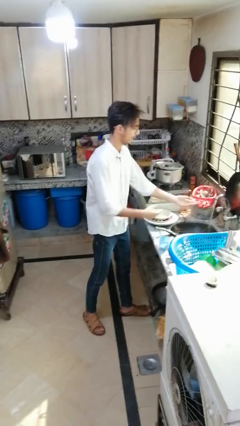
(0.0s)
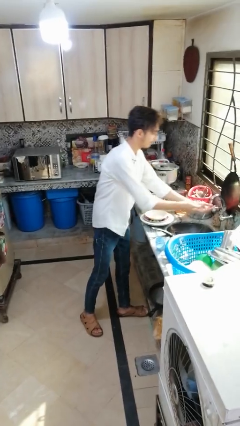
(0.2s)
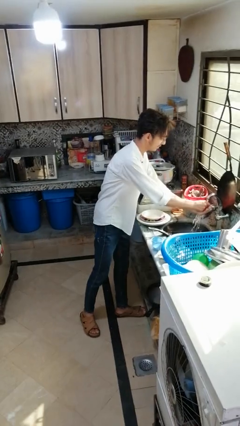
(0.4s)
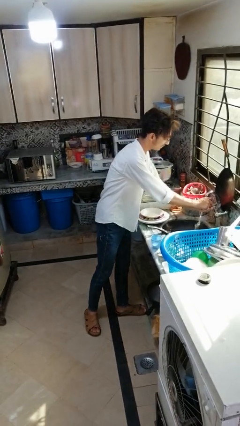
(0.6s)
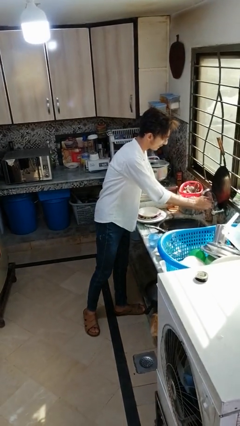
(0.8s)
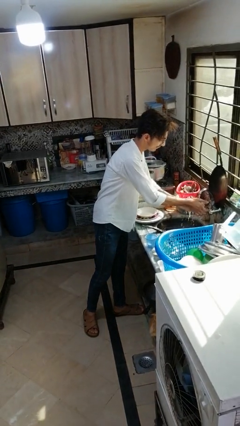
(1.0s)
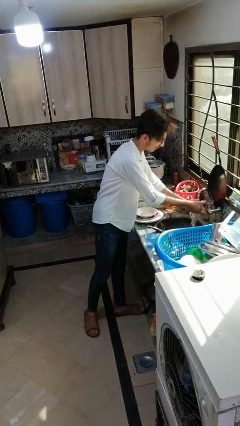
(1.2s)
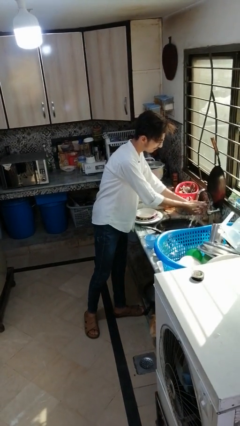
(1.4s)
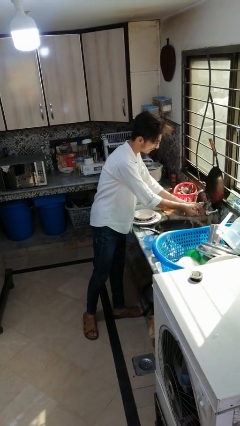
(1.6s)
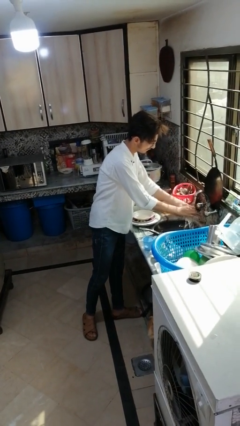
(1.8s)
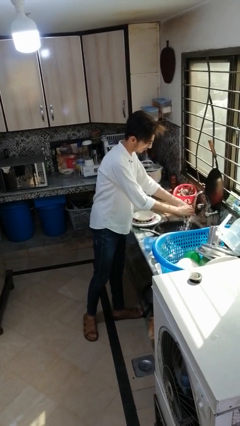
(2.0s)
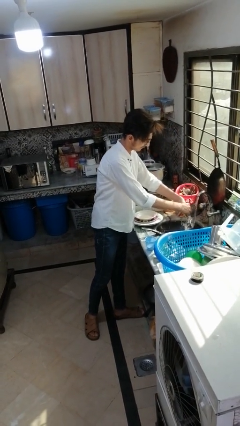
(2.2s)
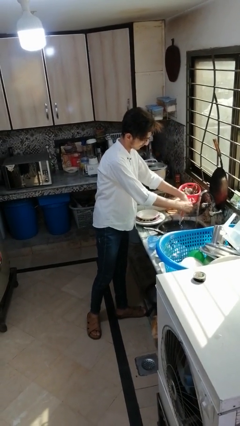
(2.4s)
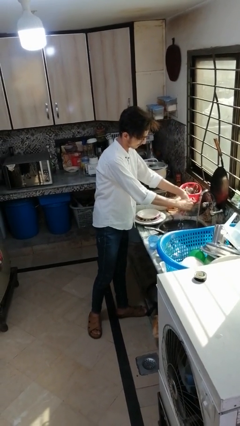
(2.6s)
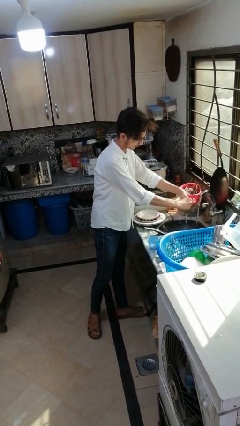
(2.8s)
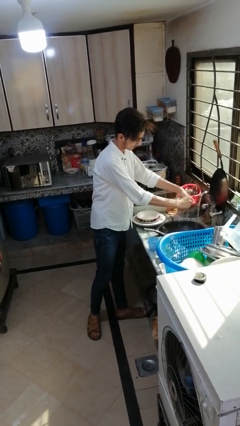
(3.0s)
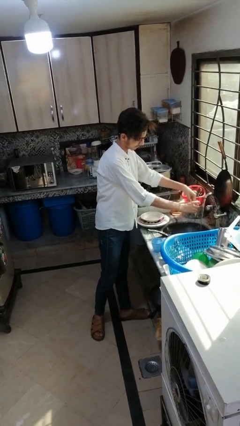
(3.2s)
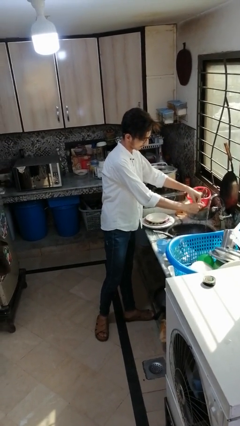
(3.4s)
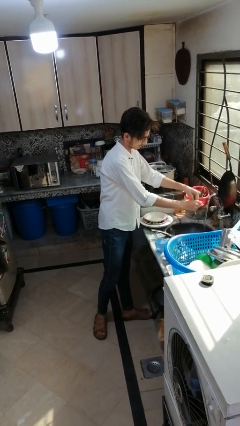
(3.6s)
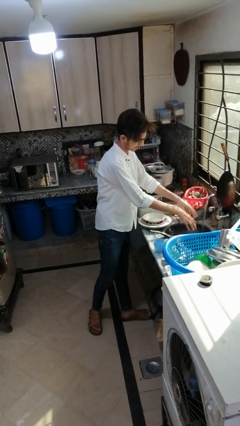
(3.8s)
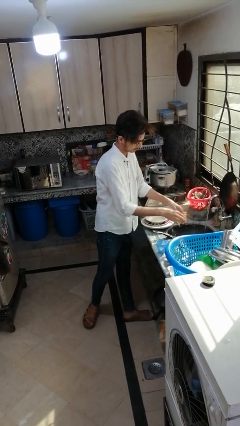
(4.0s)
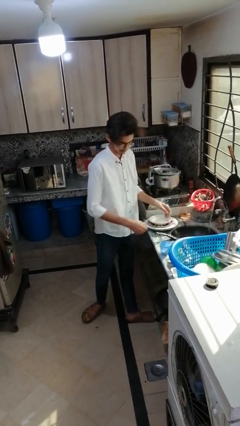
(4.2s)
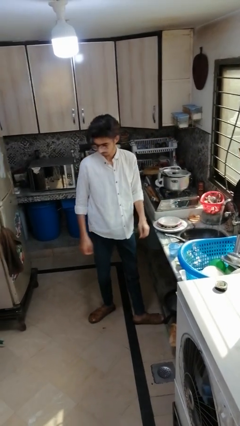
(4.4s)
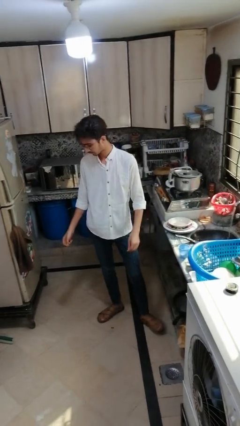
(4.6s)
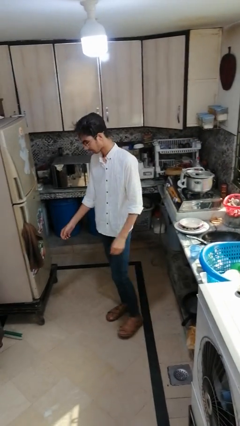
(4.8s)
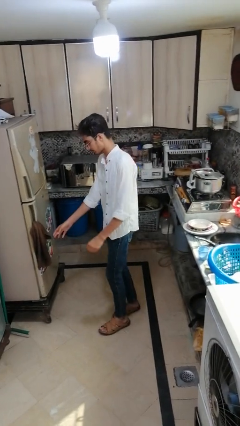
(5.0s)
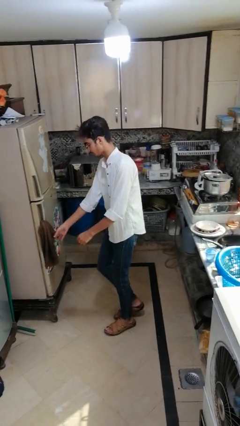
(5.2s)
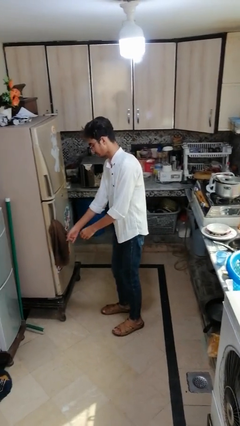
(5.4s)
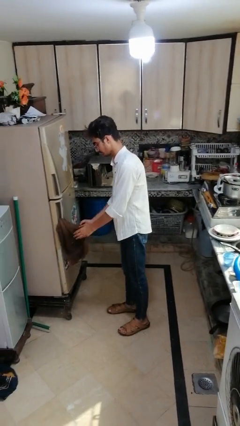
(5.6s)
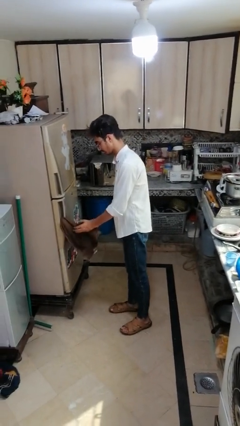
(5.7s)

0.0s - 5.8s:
person washes hands

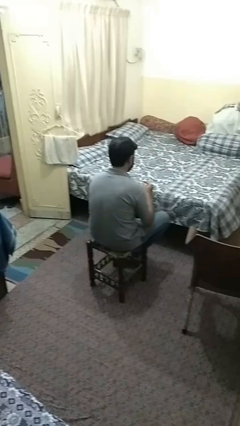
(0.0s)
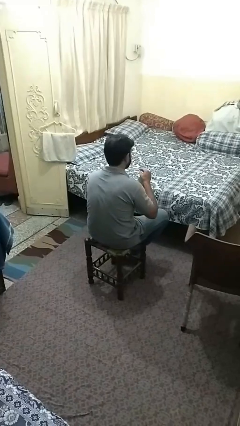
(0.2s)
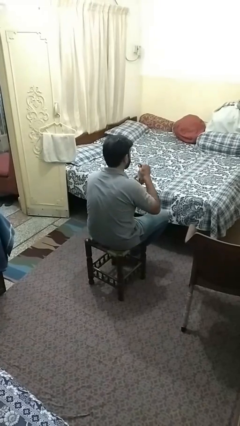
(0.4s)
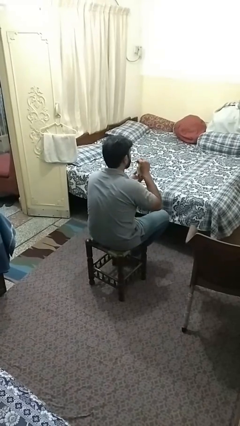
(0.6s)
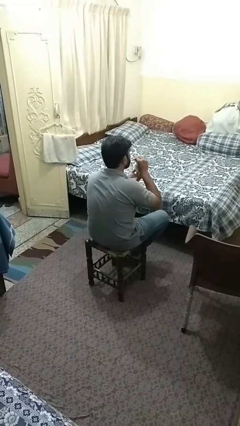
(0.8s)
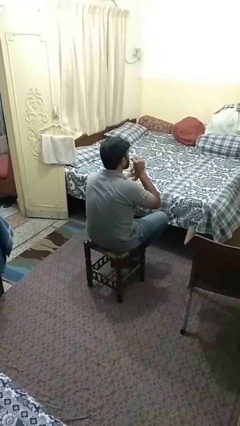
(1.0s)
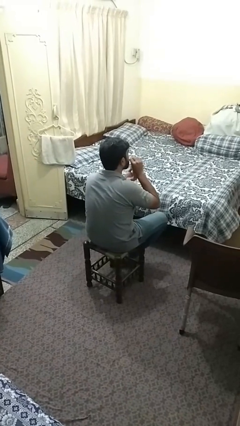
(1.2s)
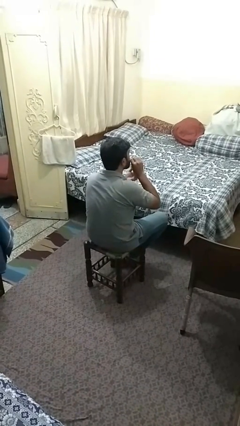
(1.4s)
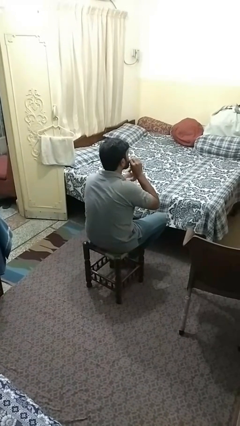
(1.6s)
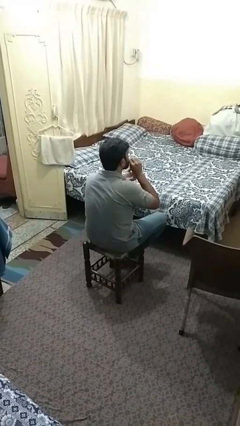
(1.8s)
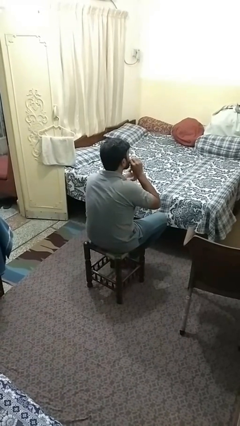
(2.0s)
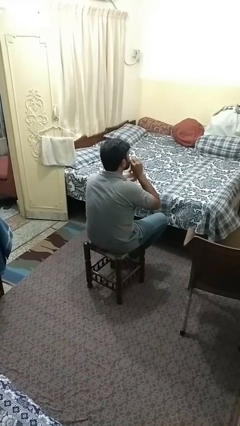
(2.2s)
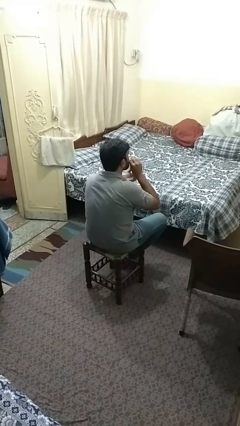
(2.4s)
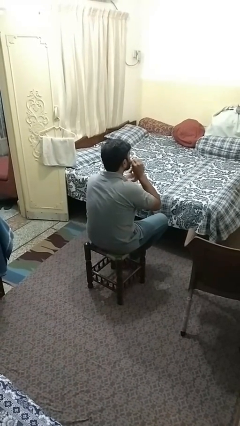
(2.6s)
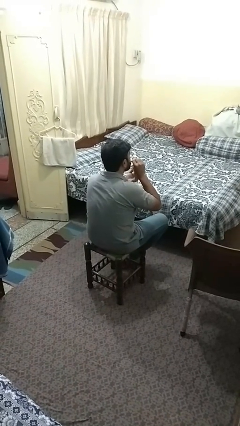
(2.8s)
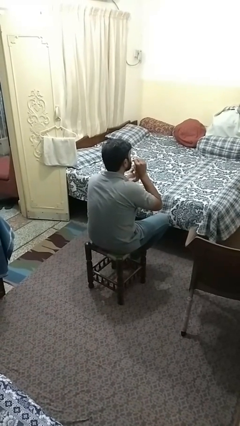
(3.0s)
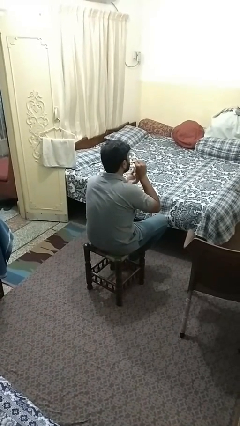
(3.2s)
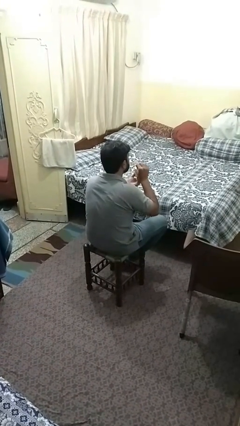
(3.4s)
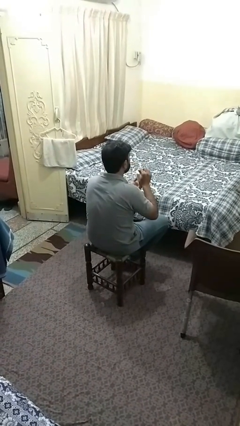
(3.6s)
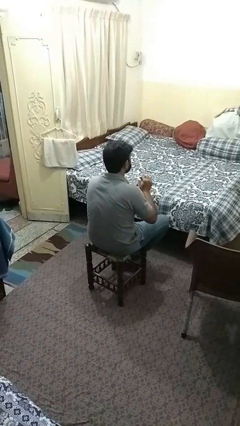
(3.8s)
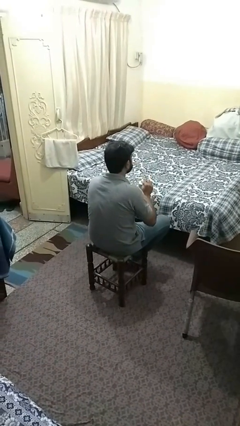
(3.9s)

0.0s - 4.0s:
person drinks from straw

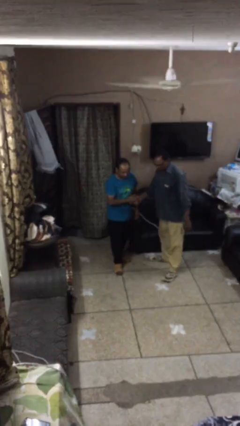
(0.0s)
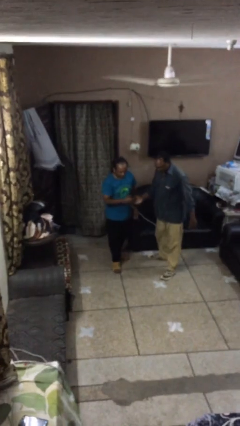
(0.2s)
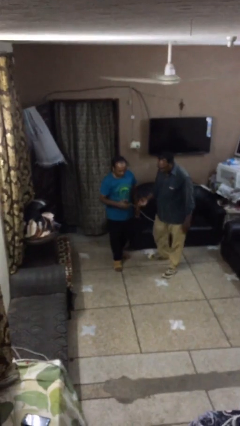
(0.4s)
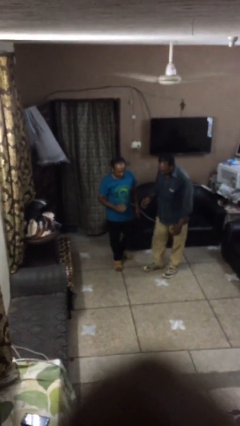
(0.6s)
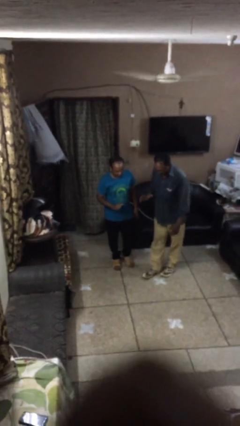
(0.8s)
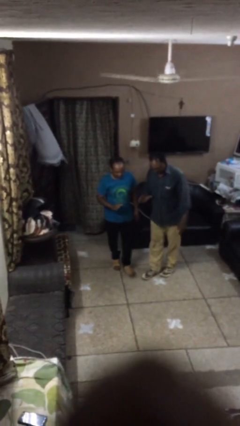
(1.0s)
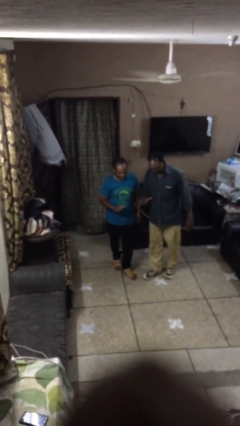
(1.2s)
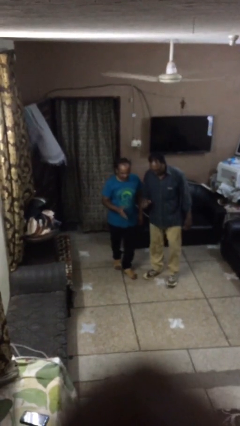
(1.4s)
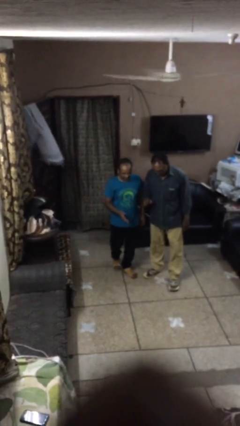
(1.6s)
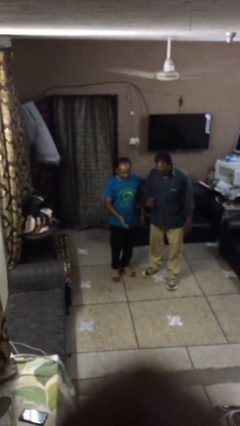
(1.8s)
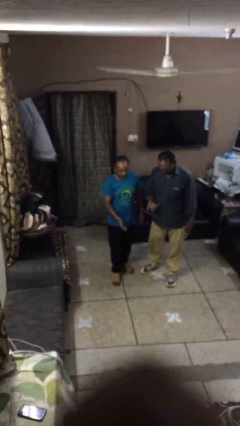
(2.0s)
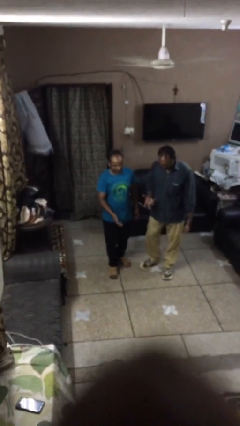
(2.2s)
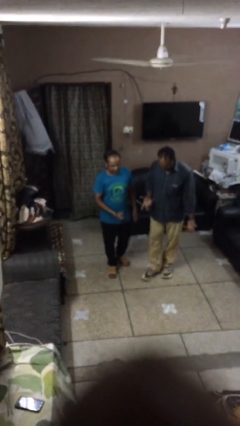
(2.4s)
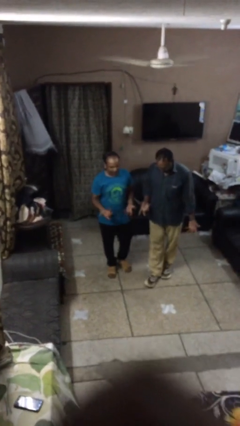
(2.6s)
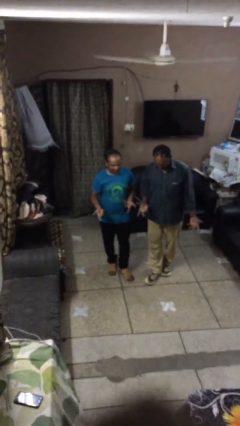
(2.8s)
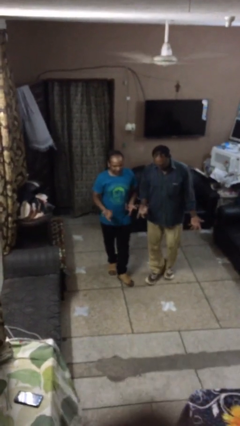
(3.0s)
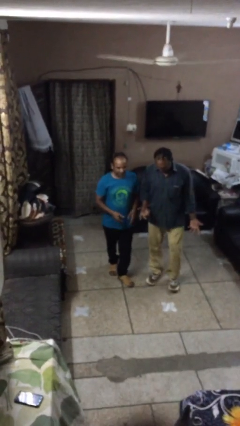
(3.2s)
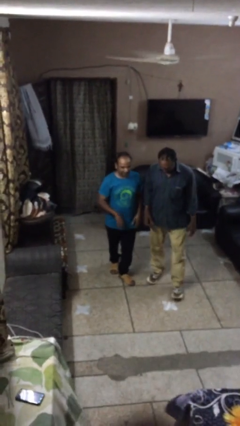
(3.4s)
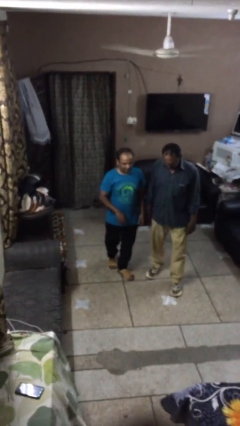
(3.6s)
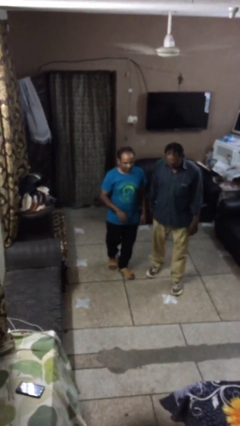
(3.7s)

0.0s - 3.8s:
person talks to person

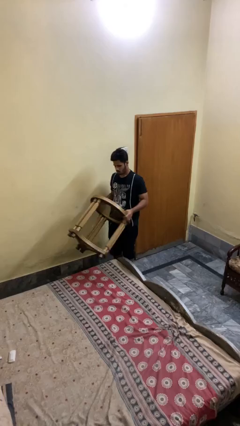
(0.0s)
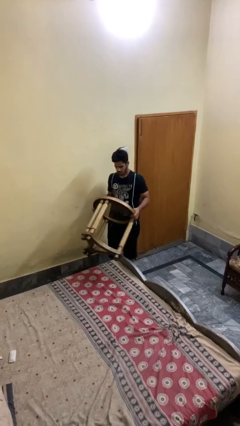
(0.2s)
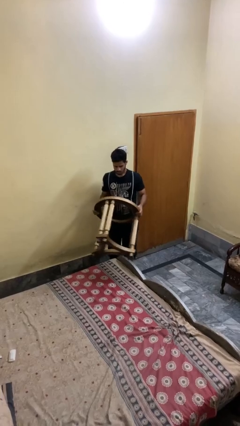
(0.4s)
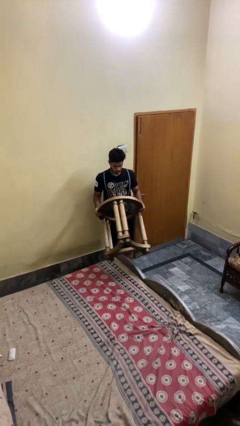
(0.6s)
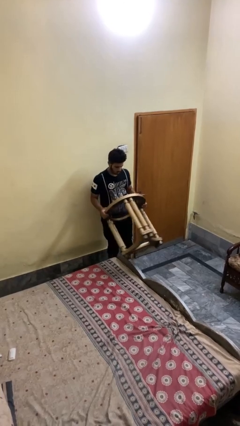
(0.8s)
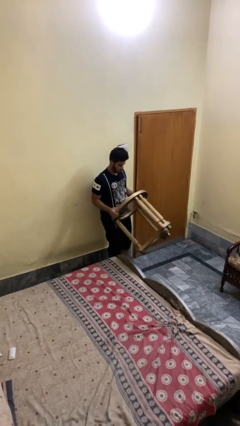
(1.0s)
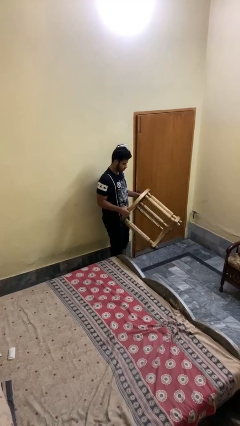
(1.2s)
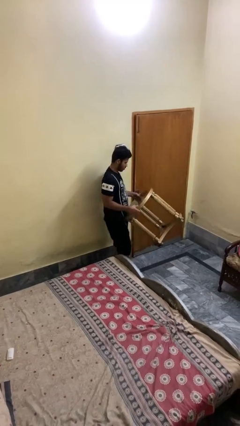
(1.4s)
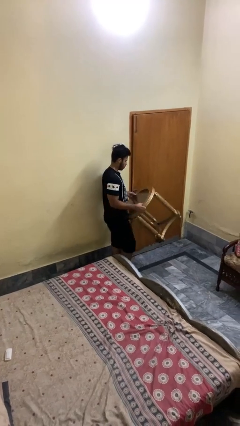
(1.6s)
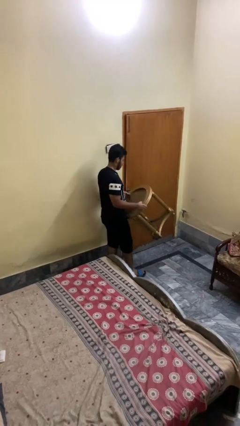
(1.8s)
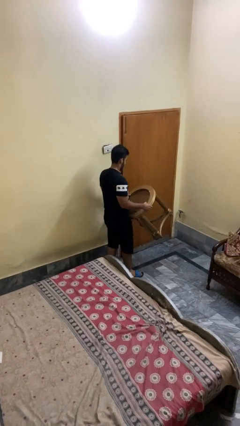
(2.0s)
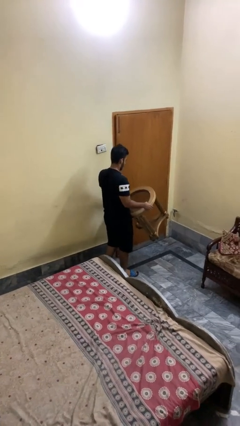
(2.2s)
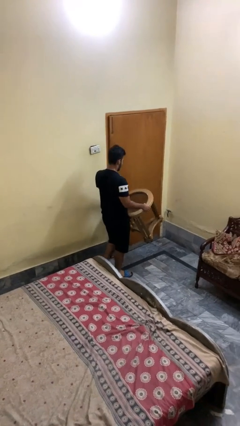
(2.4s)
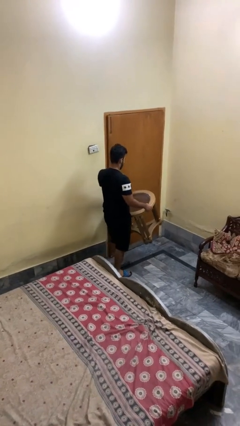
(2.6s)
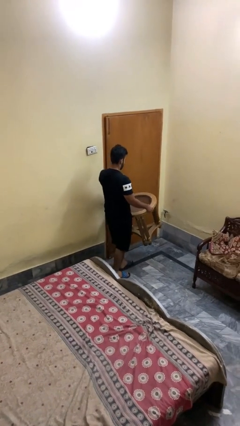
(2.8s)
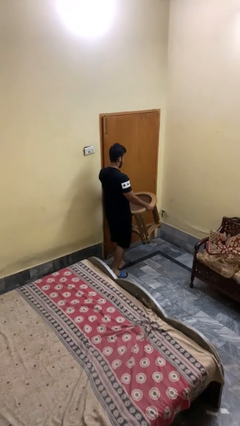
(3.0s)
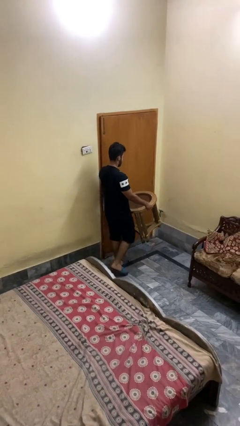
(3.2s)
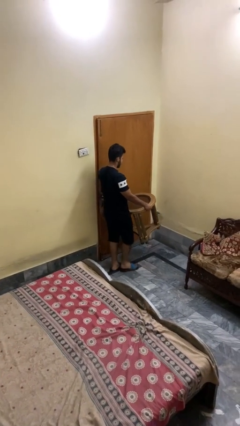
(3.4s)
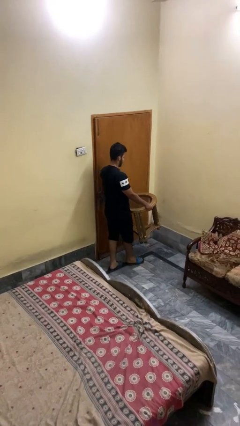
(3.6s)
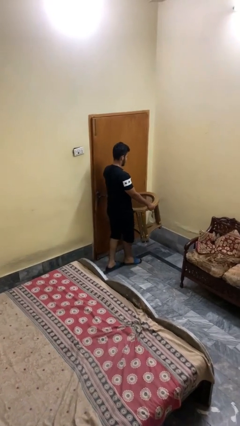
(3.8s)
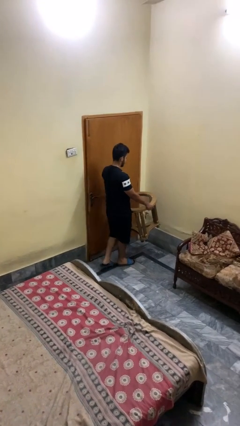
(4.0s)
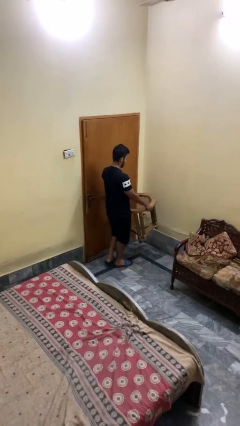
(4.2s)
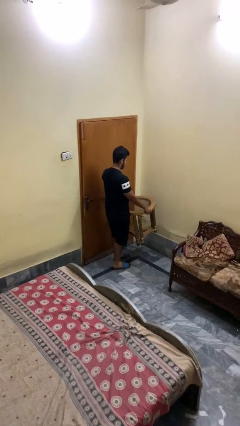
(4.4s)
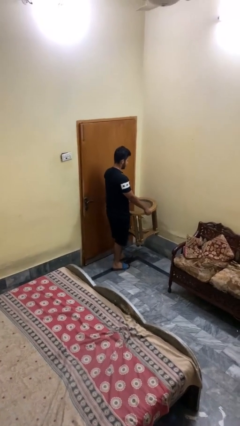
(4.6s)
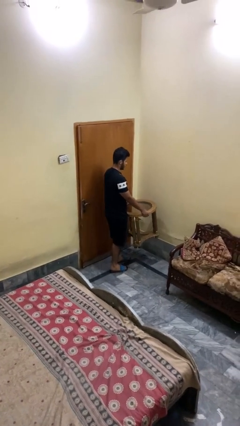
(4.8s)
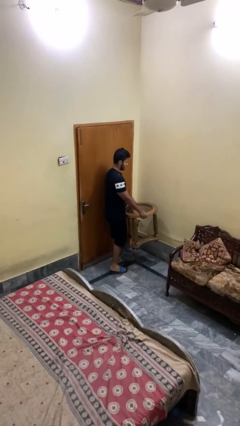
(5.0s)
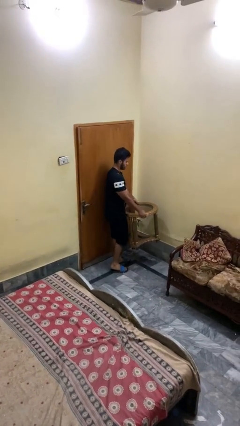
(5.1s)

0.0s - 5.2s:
person carries furniture
